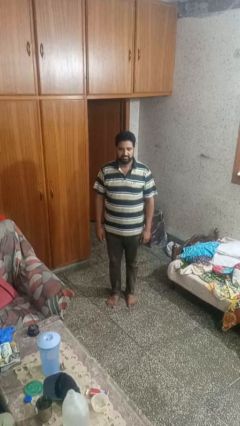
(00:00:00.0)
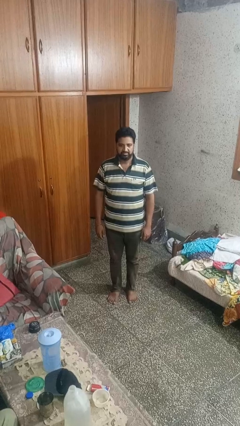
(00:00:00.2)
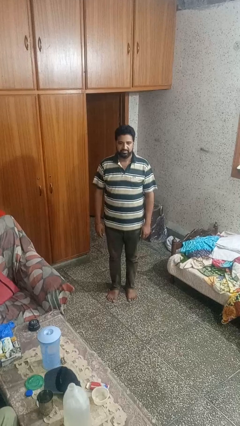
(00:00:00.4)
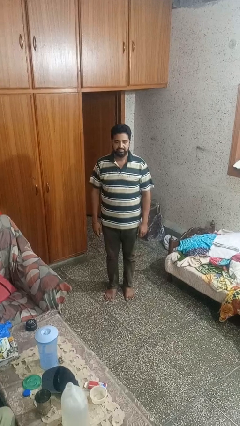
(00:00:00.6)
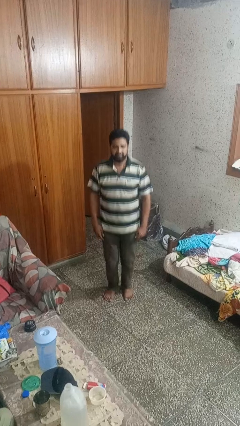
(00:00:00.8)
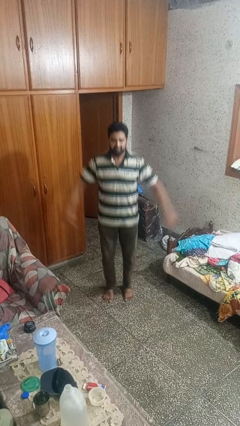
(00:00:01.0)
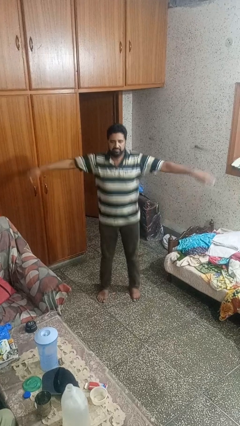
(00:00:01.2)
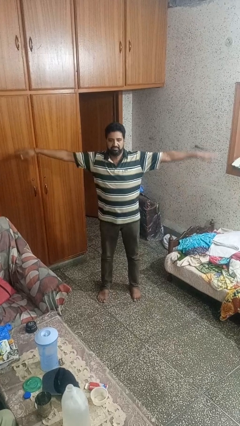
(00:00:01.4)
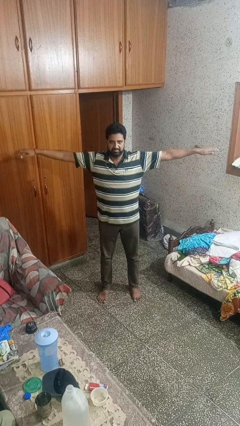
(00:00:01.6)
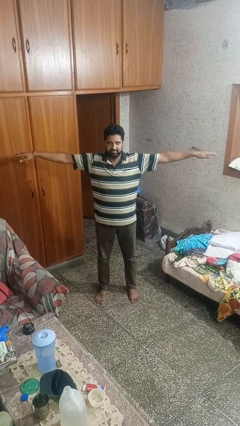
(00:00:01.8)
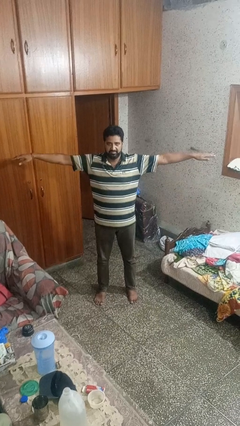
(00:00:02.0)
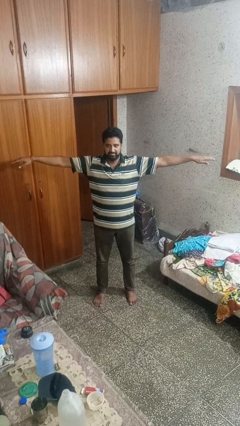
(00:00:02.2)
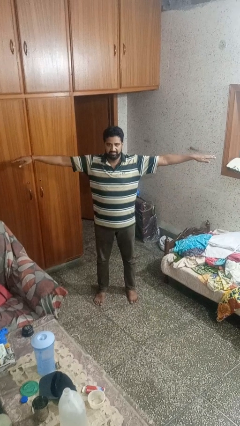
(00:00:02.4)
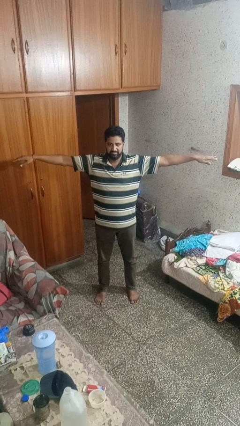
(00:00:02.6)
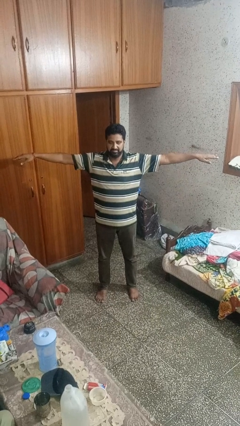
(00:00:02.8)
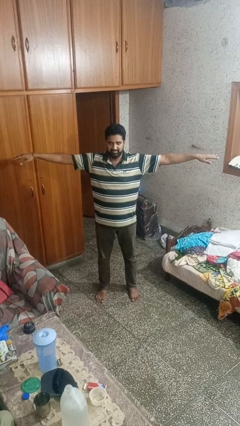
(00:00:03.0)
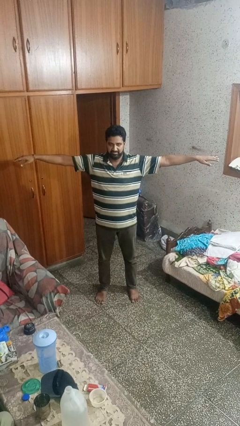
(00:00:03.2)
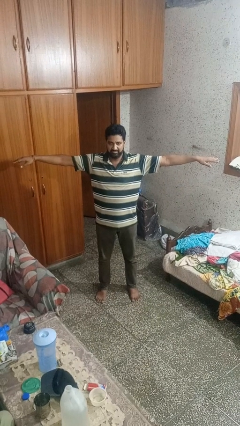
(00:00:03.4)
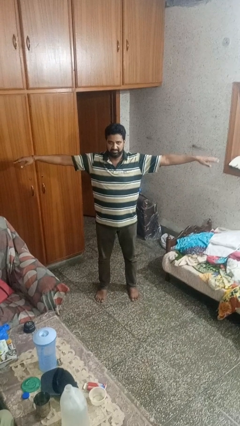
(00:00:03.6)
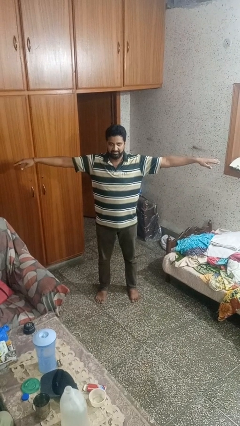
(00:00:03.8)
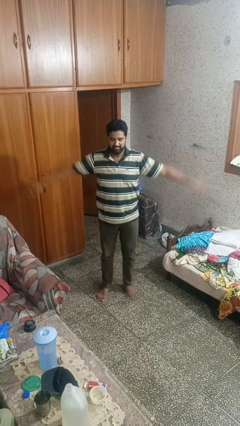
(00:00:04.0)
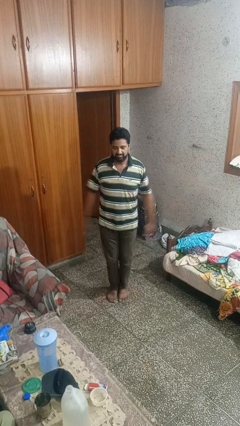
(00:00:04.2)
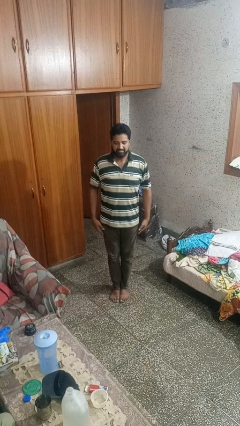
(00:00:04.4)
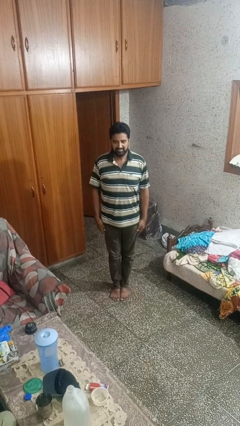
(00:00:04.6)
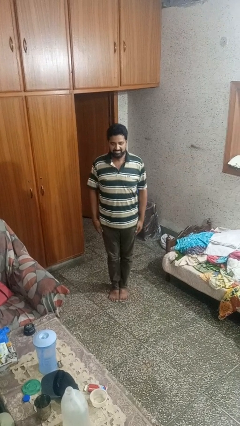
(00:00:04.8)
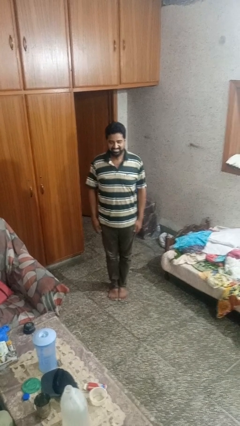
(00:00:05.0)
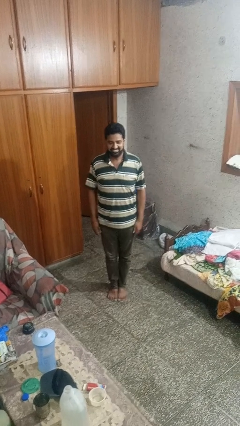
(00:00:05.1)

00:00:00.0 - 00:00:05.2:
person exercises with jumping jacks

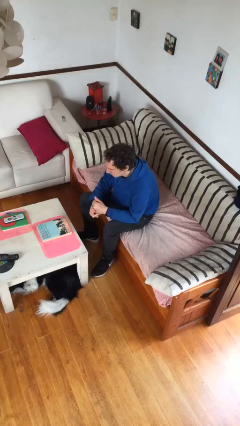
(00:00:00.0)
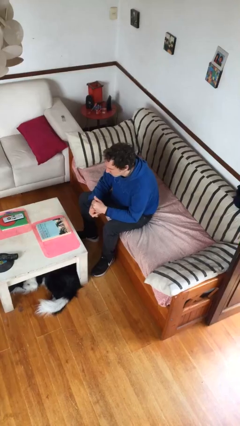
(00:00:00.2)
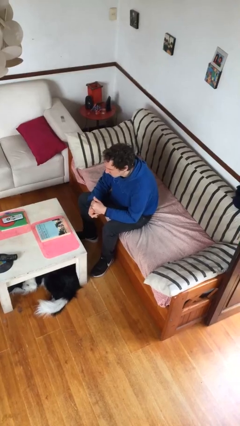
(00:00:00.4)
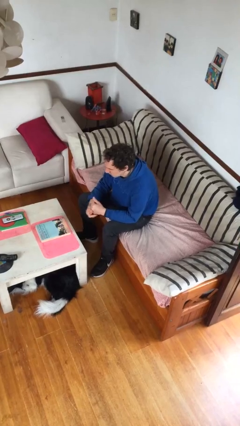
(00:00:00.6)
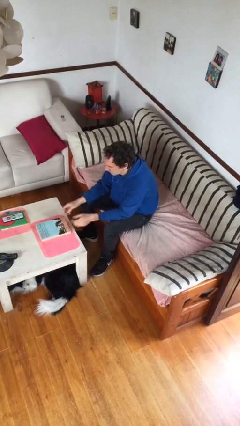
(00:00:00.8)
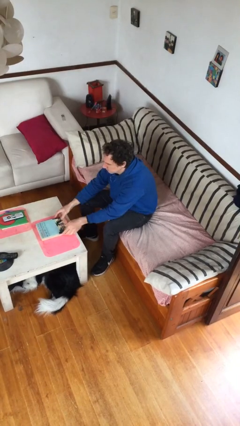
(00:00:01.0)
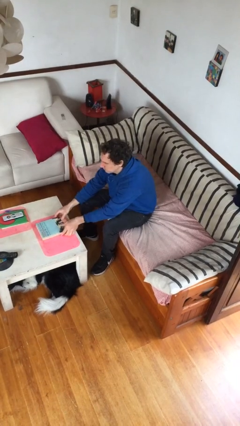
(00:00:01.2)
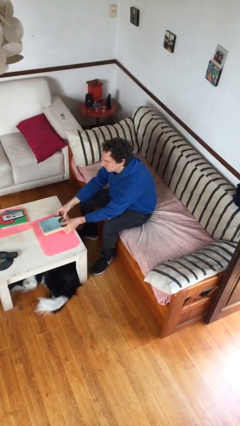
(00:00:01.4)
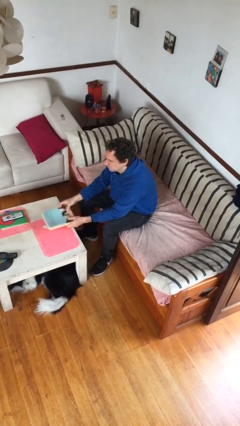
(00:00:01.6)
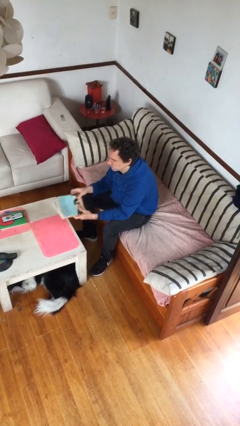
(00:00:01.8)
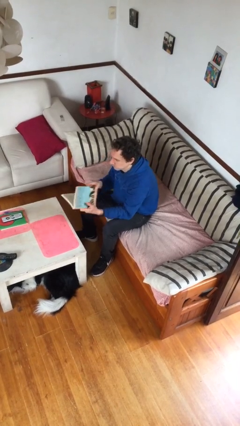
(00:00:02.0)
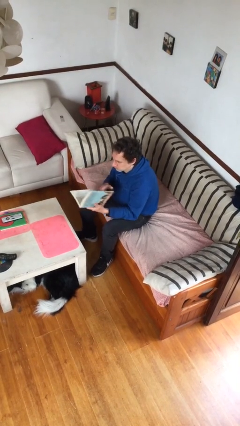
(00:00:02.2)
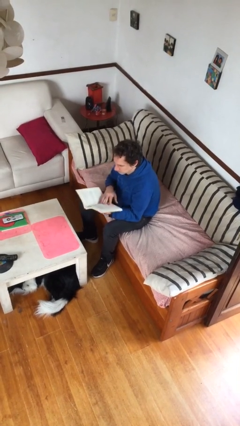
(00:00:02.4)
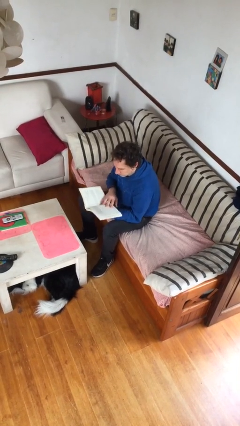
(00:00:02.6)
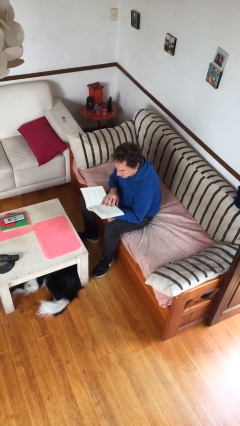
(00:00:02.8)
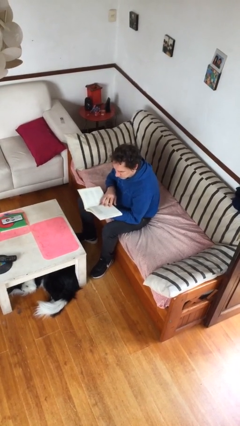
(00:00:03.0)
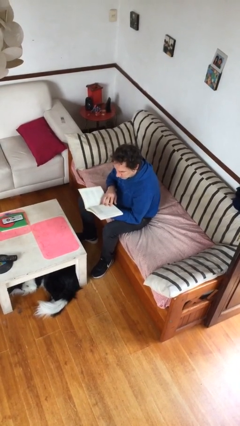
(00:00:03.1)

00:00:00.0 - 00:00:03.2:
person picks up object from table

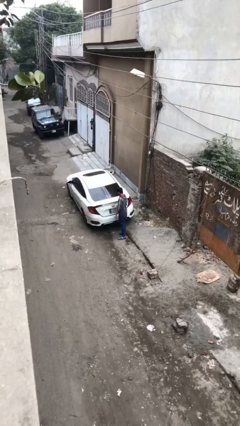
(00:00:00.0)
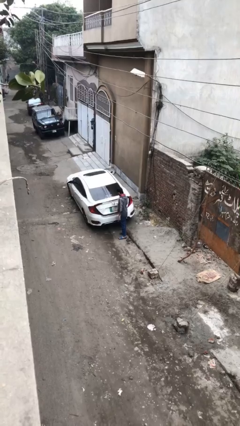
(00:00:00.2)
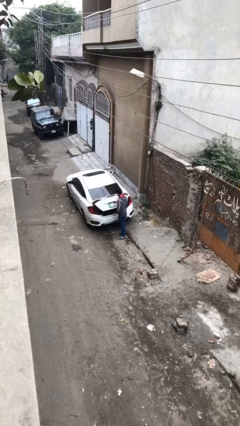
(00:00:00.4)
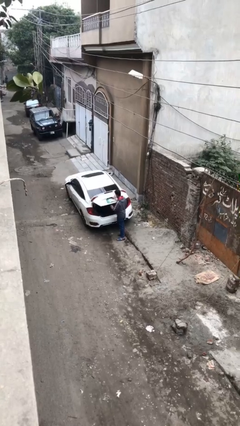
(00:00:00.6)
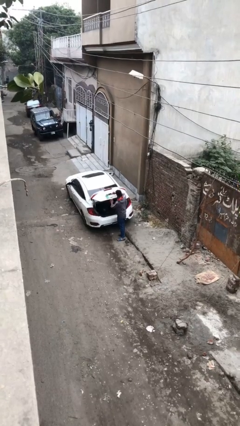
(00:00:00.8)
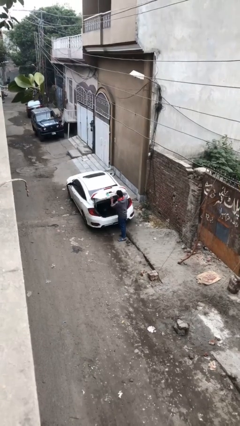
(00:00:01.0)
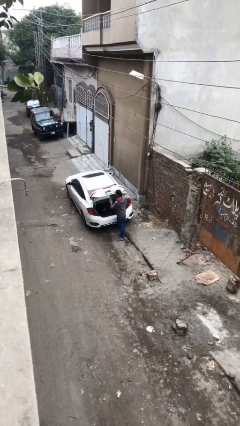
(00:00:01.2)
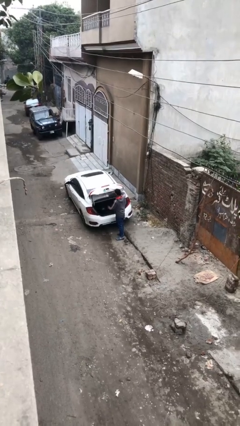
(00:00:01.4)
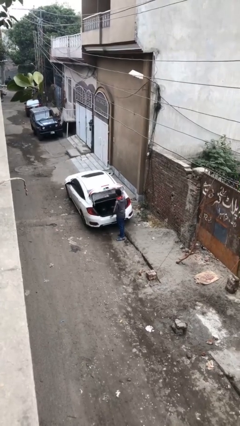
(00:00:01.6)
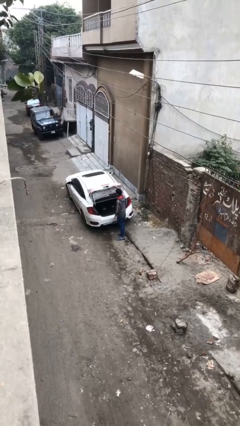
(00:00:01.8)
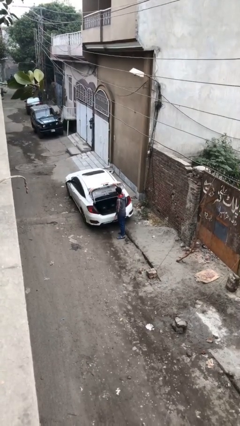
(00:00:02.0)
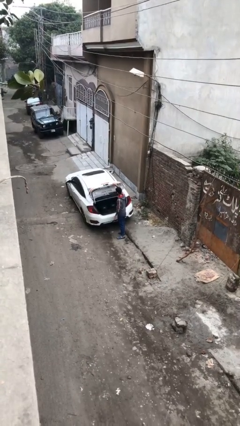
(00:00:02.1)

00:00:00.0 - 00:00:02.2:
person opens car trunk

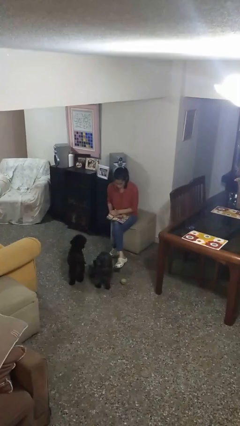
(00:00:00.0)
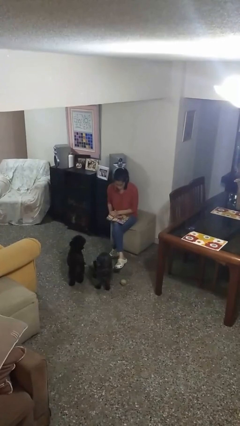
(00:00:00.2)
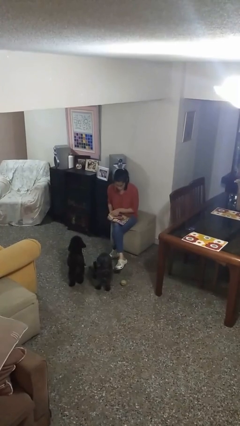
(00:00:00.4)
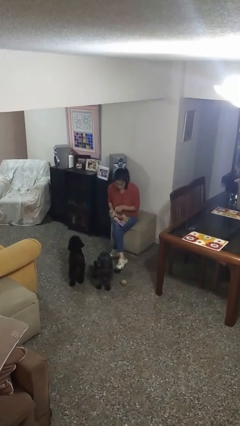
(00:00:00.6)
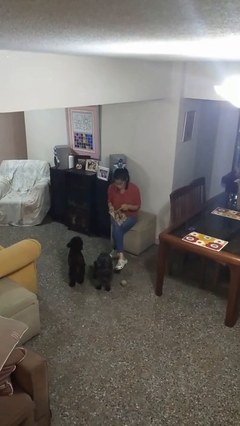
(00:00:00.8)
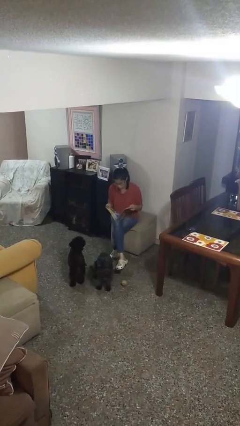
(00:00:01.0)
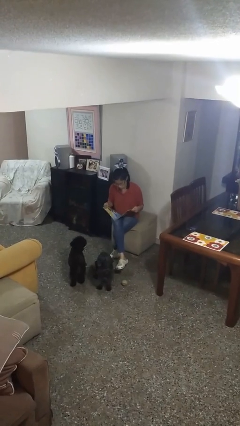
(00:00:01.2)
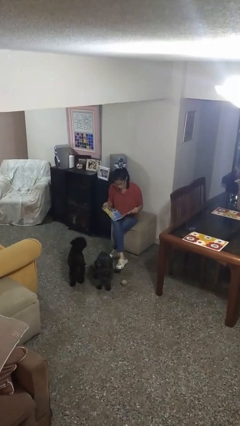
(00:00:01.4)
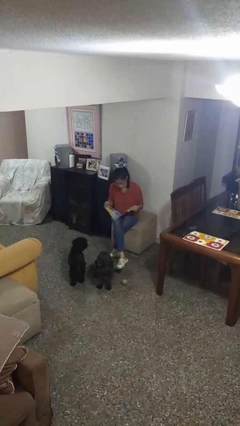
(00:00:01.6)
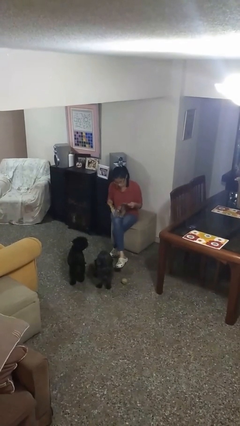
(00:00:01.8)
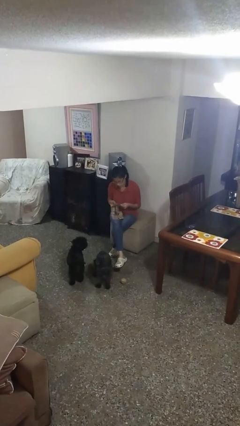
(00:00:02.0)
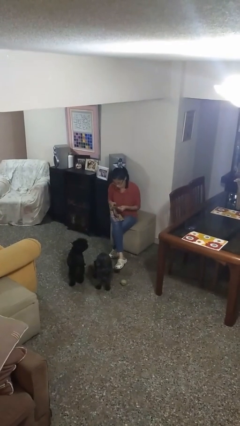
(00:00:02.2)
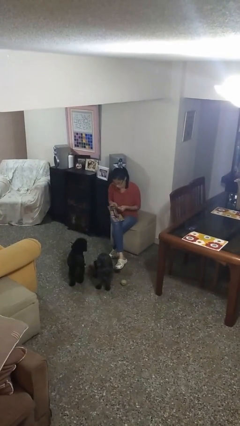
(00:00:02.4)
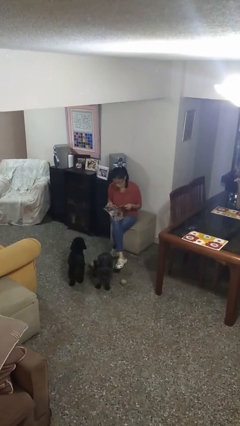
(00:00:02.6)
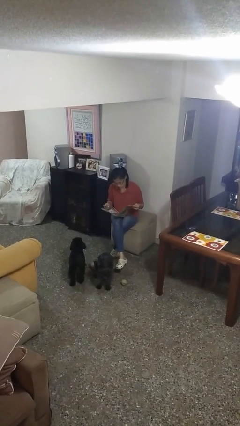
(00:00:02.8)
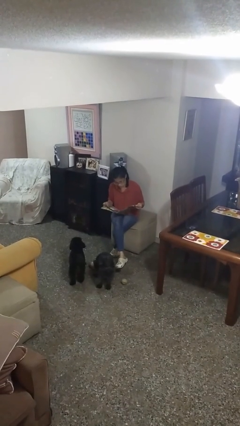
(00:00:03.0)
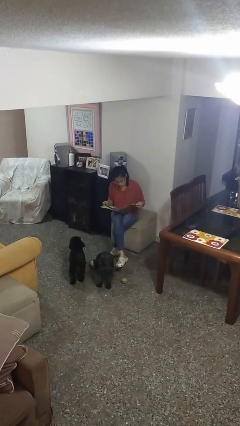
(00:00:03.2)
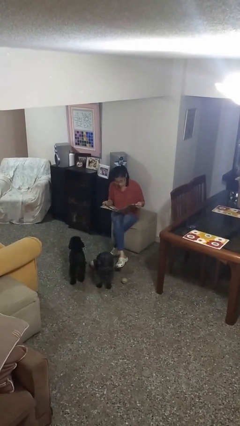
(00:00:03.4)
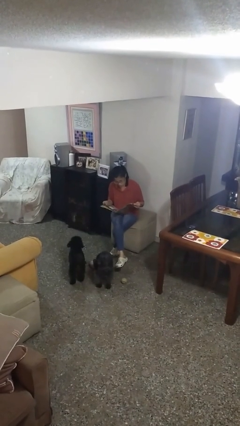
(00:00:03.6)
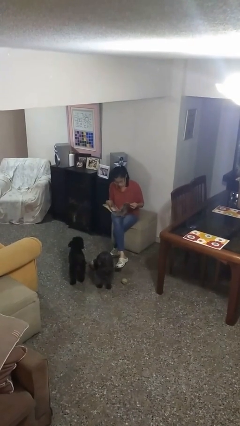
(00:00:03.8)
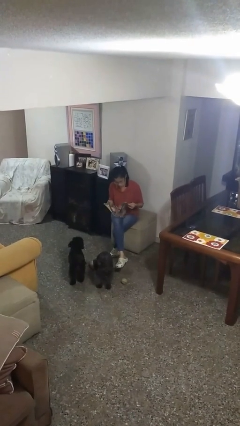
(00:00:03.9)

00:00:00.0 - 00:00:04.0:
person reads magazine

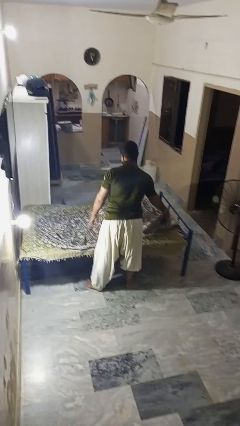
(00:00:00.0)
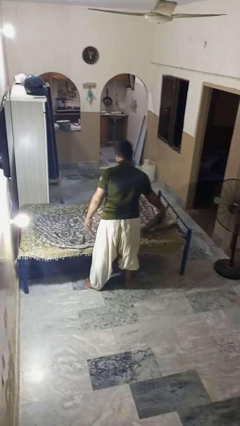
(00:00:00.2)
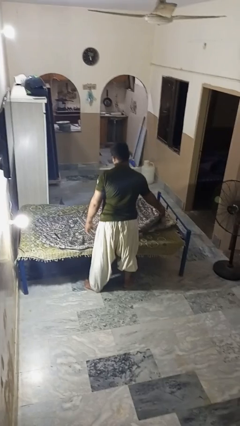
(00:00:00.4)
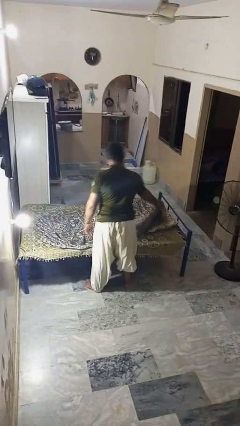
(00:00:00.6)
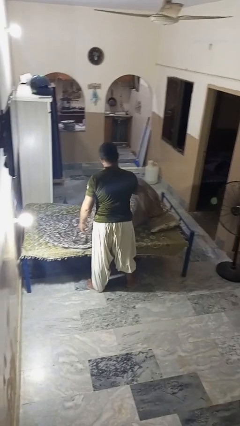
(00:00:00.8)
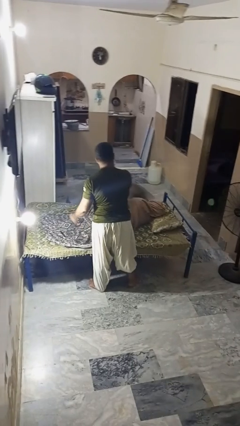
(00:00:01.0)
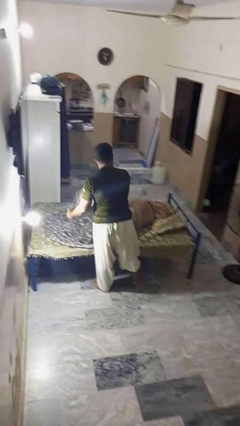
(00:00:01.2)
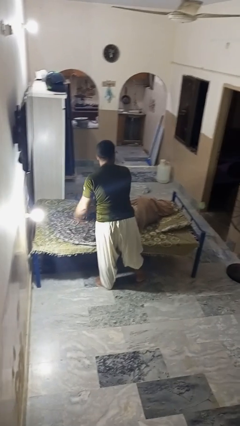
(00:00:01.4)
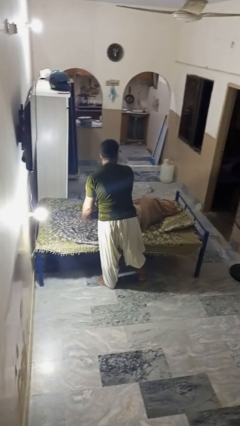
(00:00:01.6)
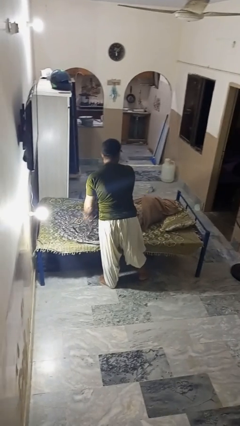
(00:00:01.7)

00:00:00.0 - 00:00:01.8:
person uncovers friend with blanket

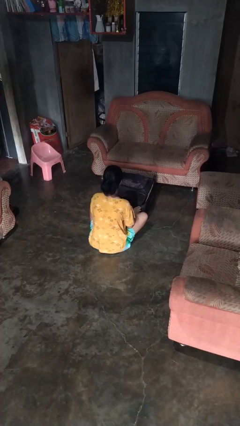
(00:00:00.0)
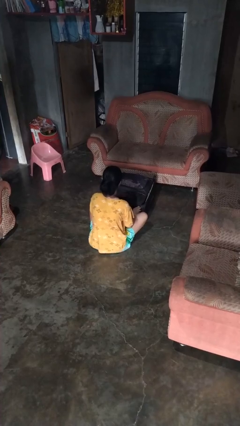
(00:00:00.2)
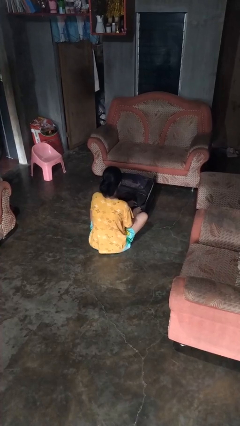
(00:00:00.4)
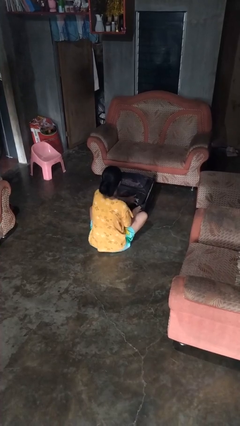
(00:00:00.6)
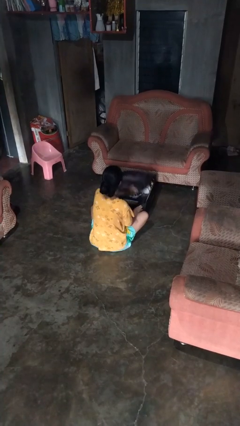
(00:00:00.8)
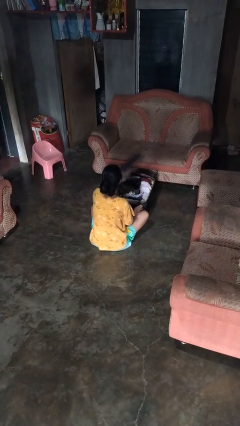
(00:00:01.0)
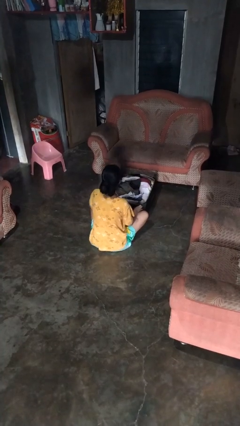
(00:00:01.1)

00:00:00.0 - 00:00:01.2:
person opens suitcase
